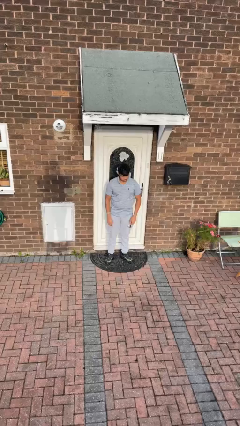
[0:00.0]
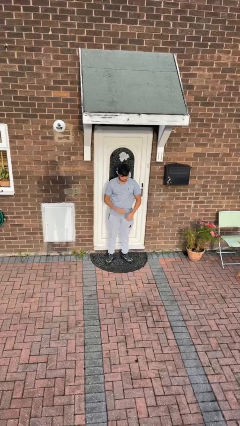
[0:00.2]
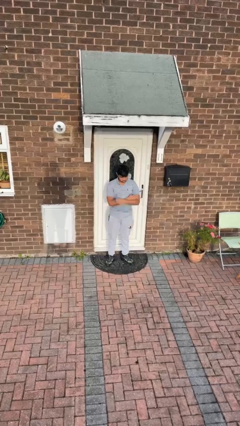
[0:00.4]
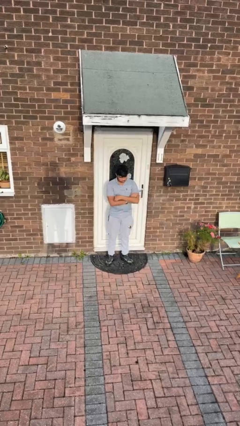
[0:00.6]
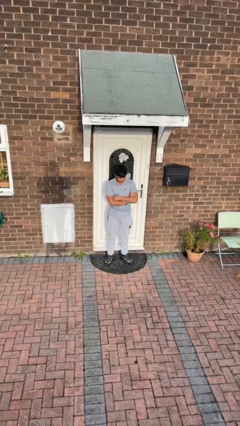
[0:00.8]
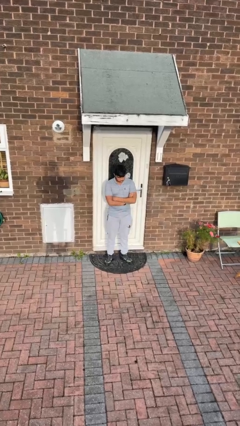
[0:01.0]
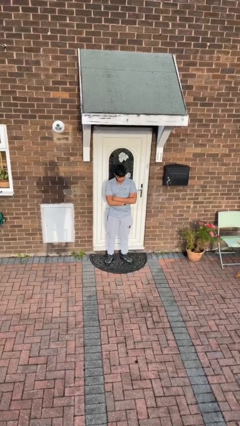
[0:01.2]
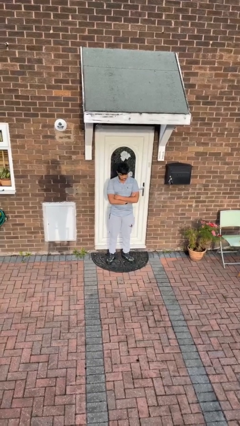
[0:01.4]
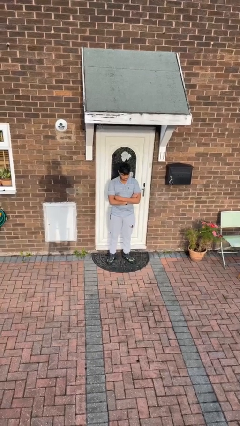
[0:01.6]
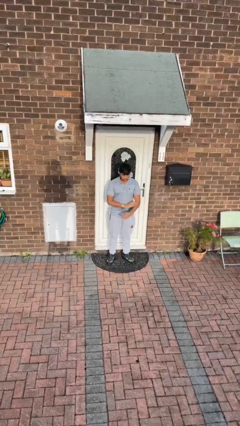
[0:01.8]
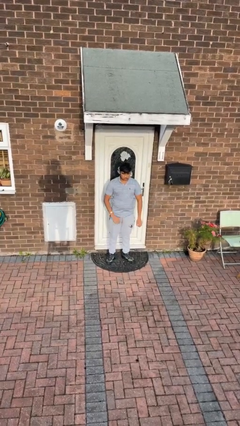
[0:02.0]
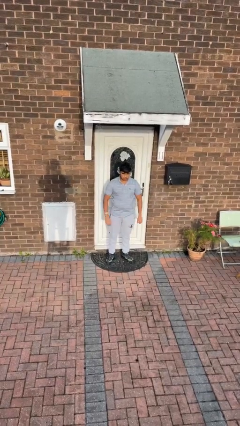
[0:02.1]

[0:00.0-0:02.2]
person crosses arms

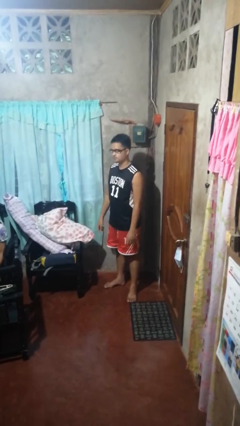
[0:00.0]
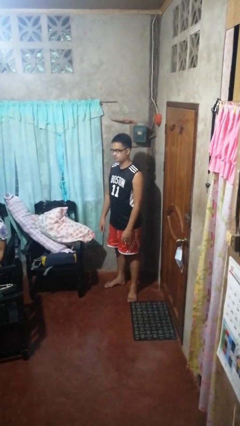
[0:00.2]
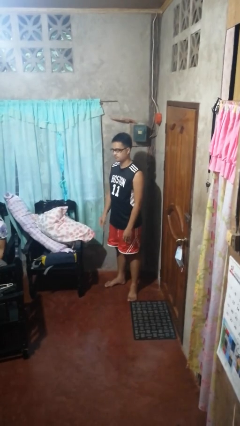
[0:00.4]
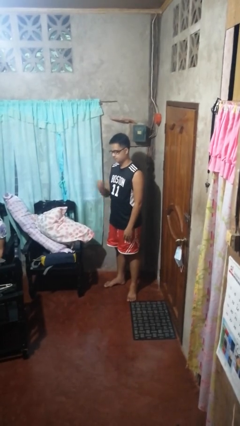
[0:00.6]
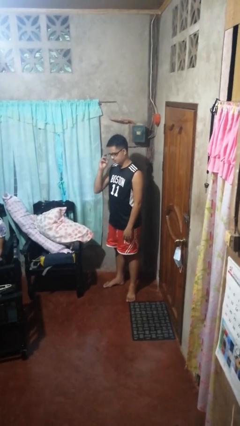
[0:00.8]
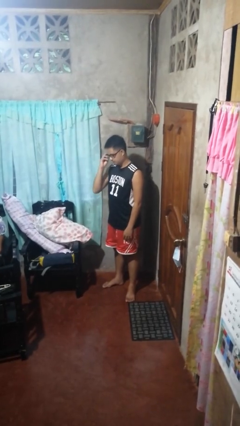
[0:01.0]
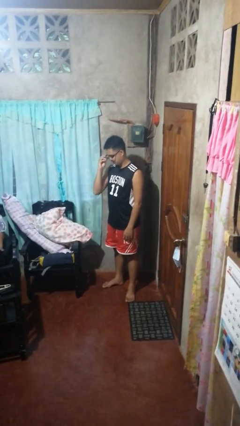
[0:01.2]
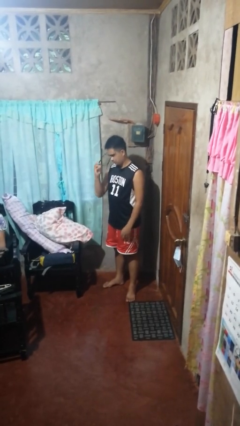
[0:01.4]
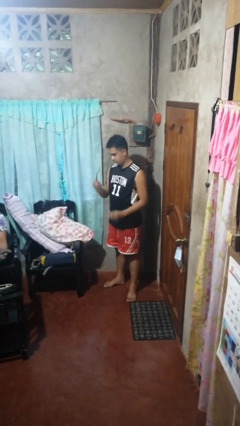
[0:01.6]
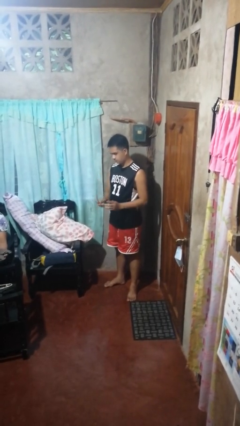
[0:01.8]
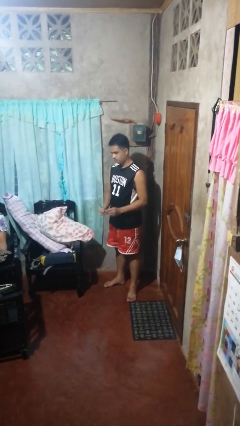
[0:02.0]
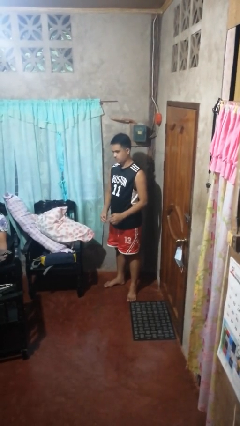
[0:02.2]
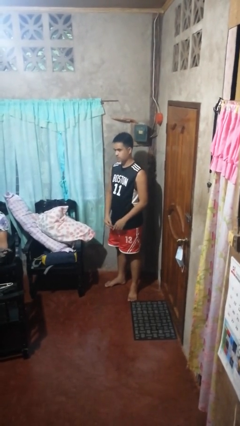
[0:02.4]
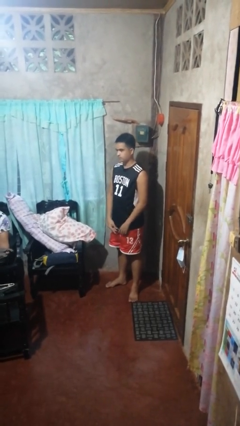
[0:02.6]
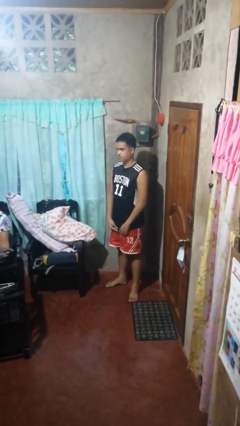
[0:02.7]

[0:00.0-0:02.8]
person takes off glasses

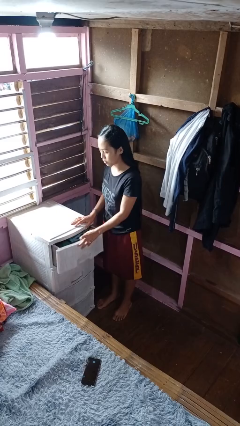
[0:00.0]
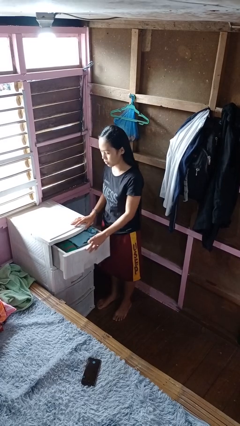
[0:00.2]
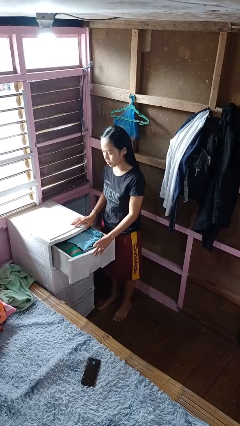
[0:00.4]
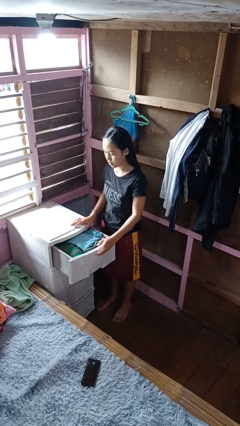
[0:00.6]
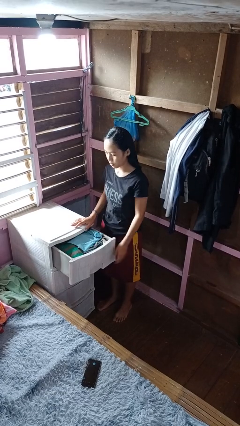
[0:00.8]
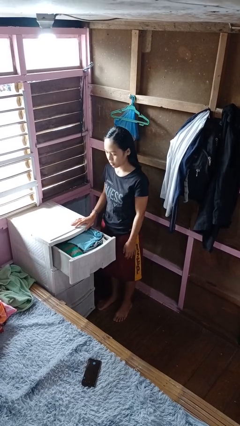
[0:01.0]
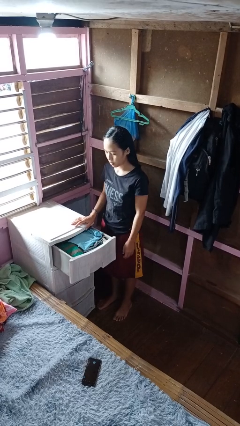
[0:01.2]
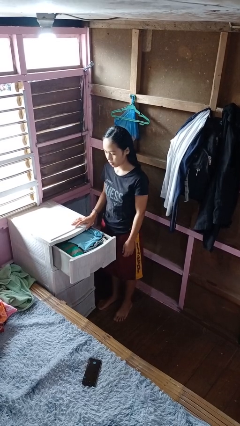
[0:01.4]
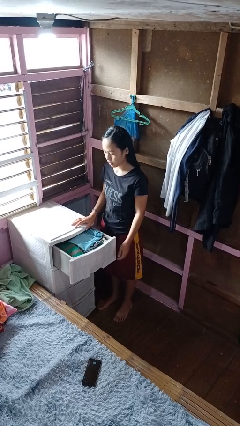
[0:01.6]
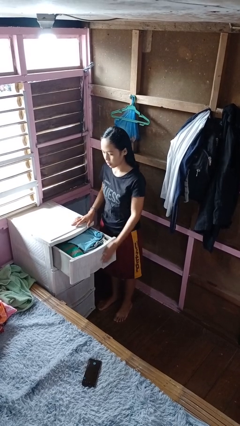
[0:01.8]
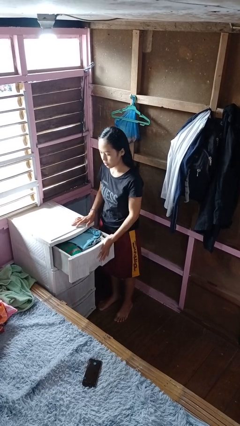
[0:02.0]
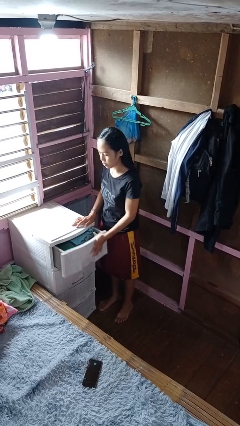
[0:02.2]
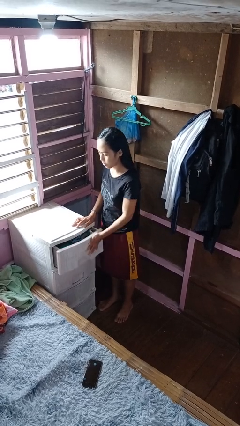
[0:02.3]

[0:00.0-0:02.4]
person opens dresser drawer

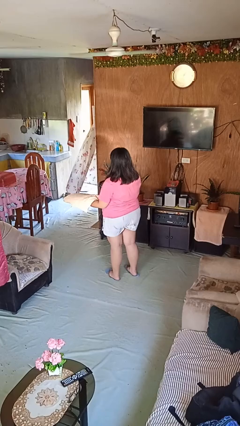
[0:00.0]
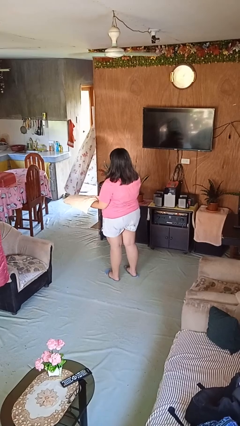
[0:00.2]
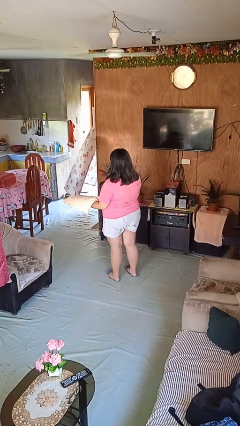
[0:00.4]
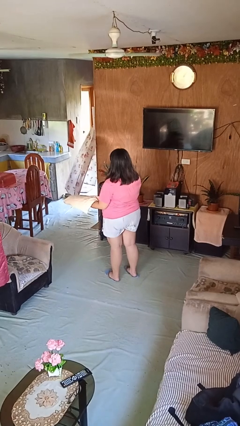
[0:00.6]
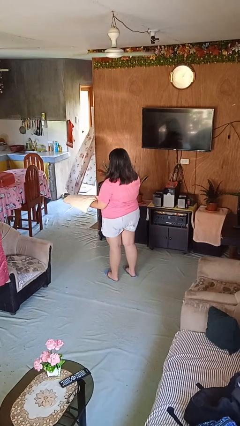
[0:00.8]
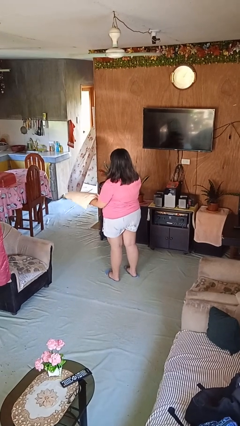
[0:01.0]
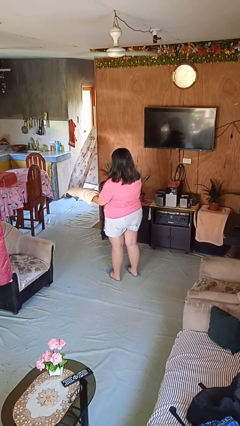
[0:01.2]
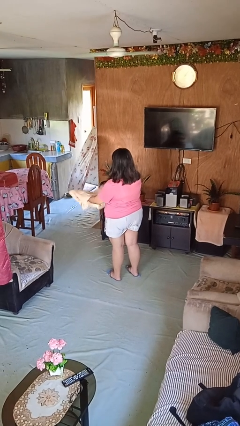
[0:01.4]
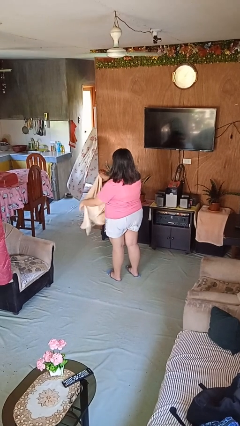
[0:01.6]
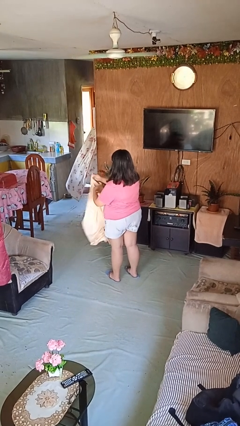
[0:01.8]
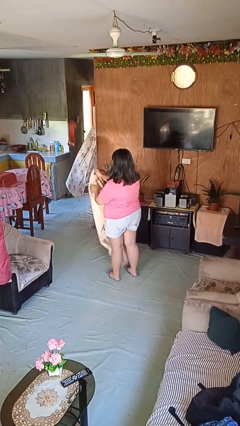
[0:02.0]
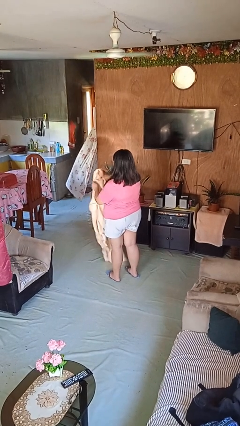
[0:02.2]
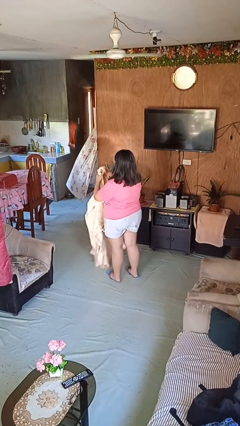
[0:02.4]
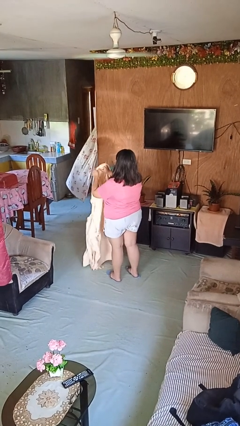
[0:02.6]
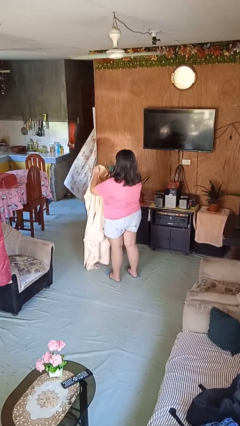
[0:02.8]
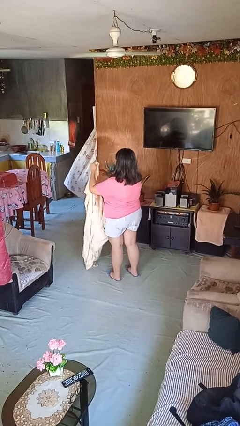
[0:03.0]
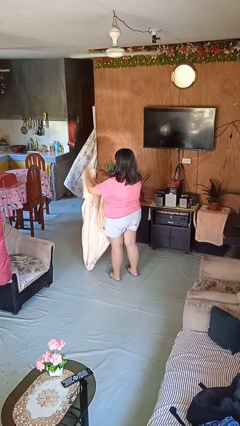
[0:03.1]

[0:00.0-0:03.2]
person unfolds blanket

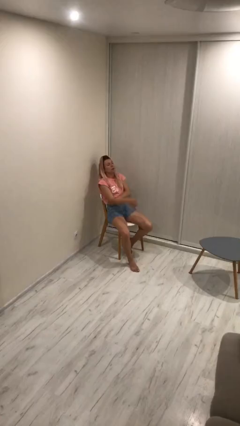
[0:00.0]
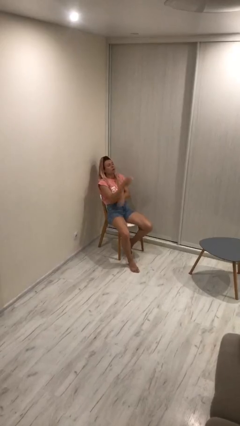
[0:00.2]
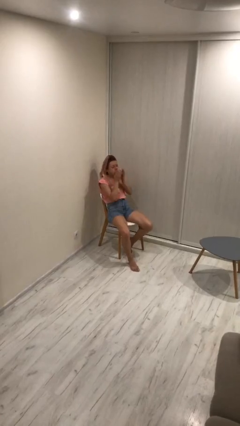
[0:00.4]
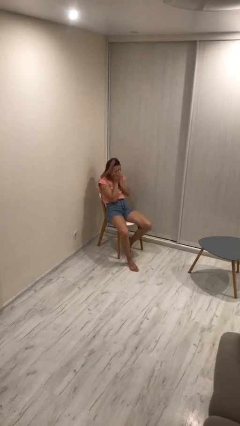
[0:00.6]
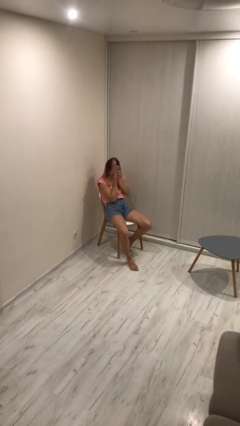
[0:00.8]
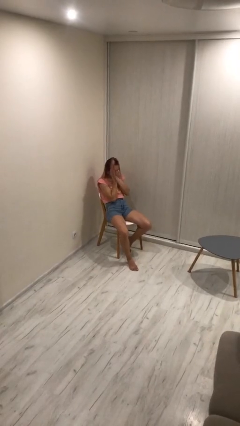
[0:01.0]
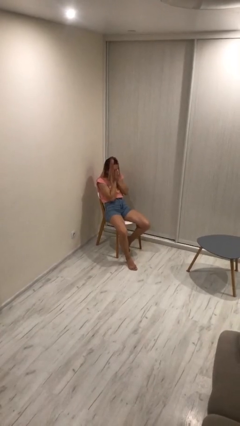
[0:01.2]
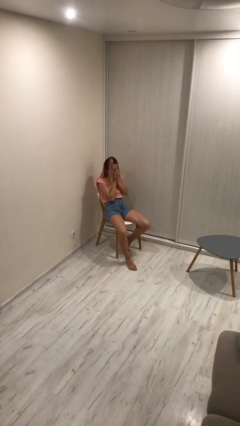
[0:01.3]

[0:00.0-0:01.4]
person sneezes into hand

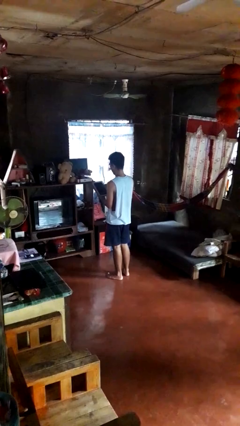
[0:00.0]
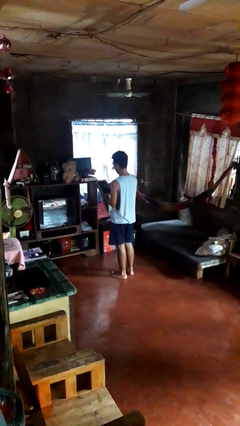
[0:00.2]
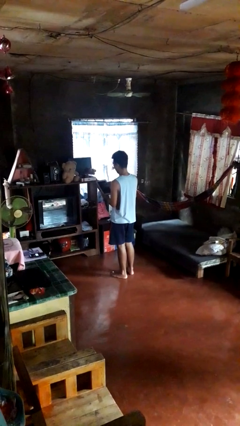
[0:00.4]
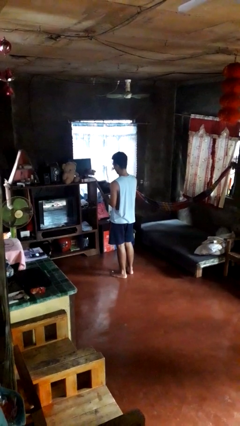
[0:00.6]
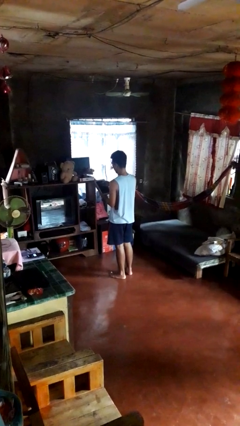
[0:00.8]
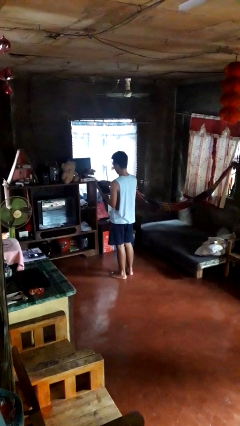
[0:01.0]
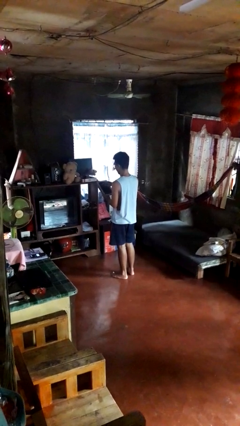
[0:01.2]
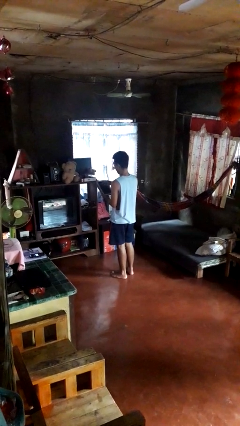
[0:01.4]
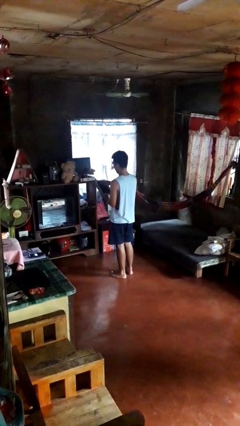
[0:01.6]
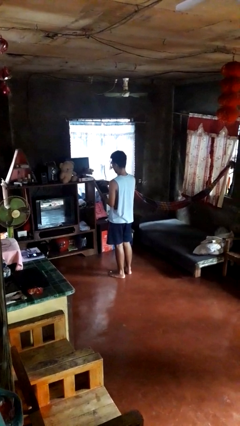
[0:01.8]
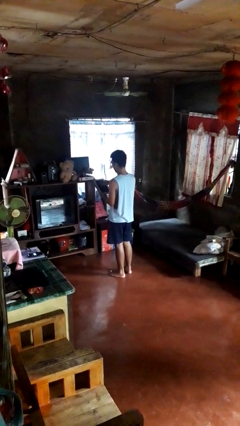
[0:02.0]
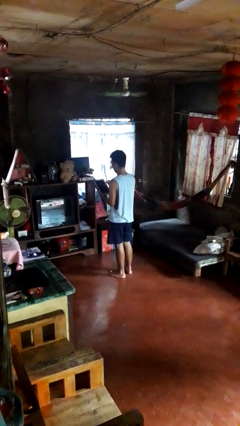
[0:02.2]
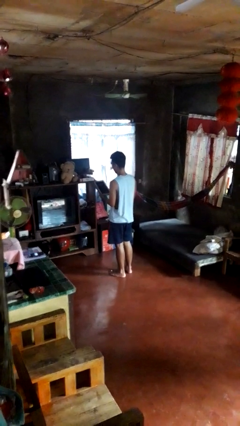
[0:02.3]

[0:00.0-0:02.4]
person interacts with tablet

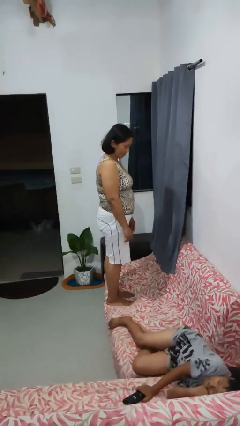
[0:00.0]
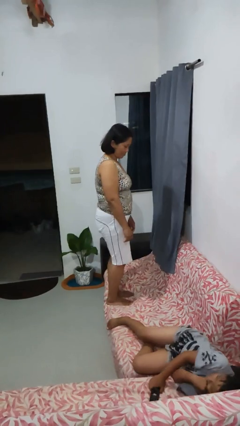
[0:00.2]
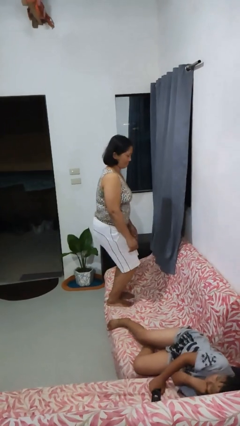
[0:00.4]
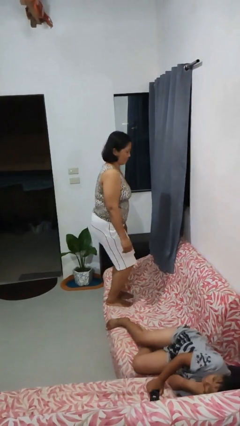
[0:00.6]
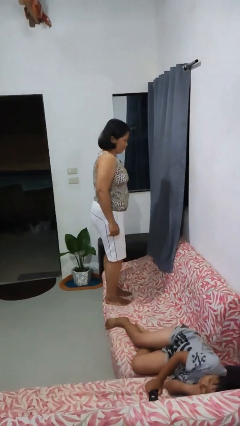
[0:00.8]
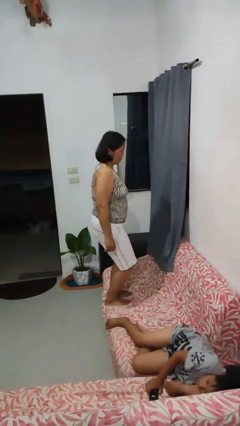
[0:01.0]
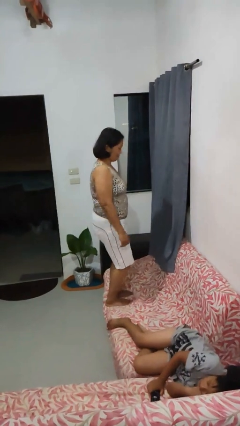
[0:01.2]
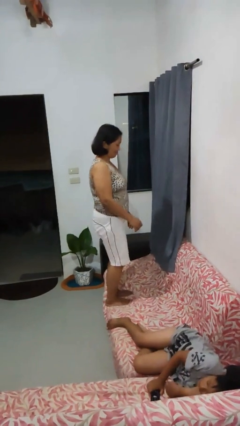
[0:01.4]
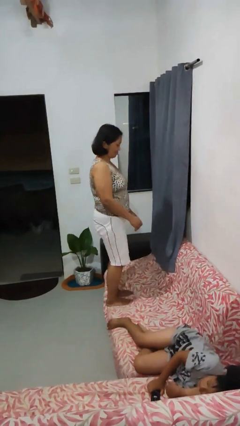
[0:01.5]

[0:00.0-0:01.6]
person jumps on couch

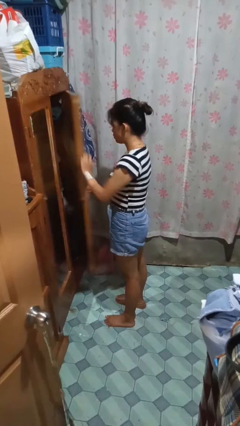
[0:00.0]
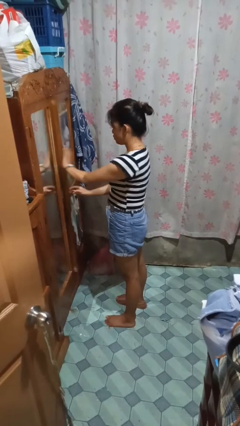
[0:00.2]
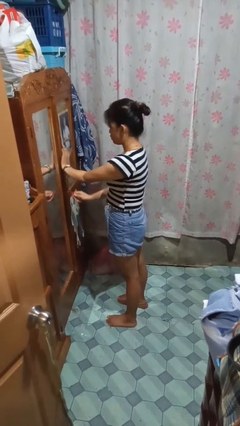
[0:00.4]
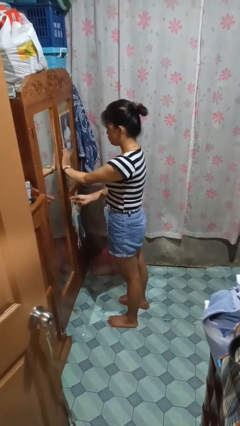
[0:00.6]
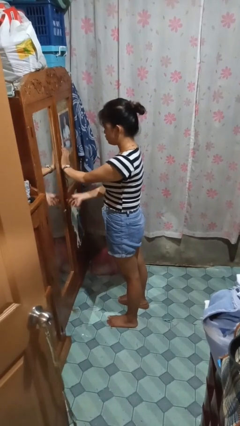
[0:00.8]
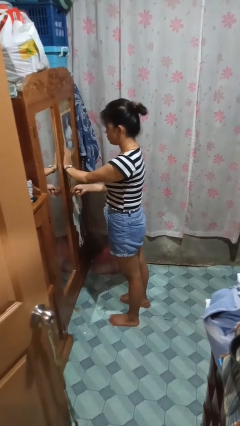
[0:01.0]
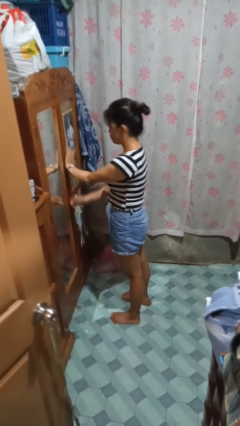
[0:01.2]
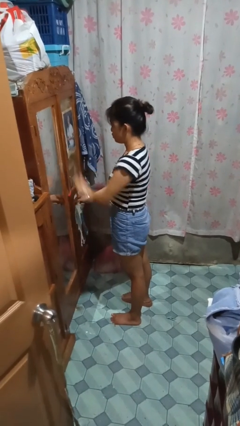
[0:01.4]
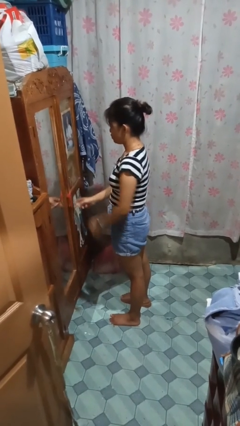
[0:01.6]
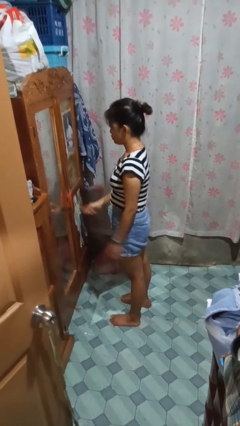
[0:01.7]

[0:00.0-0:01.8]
person closes closet door
